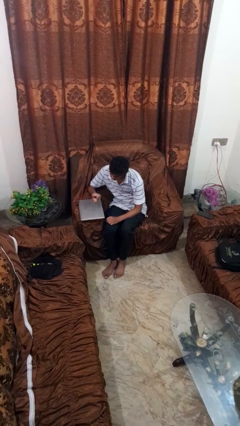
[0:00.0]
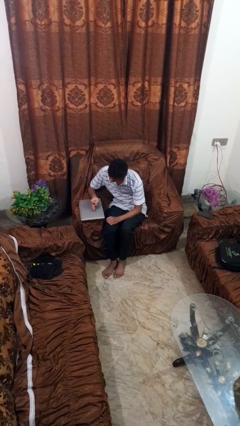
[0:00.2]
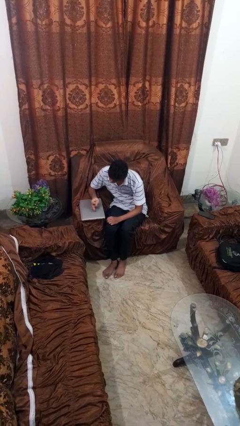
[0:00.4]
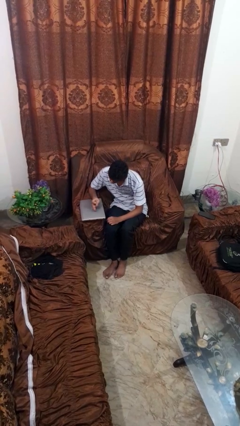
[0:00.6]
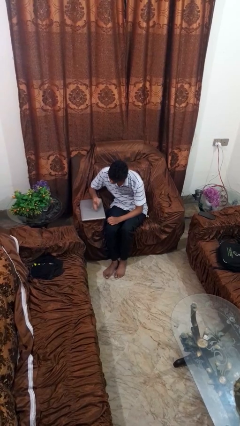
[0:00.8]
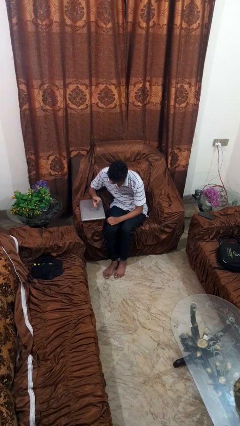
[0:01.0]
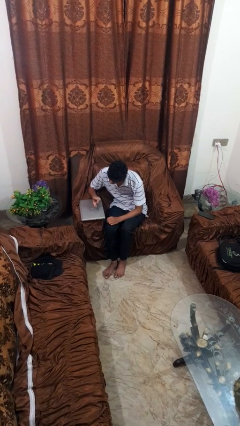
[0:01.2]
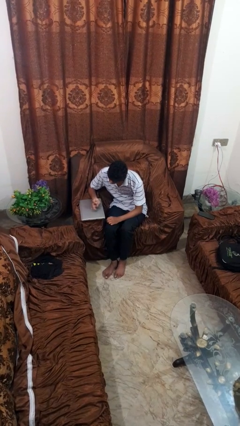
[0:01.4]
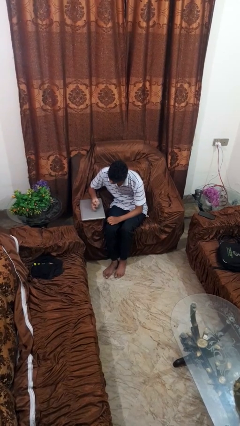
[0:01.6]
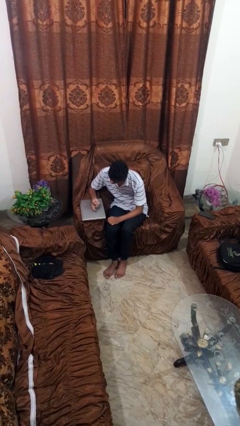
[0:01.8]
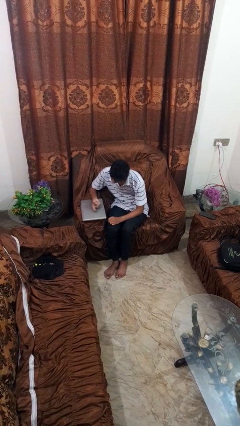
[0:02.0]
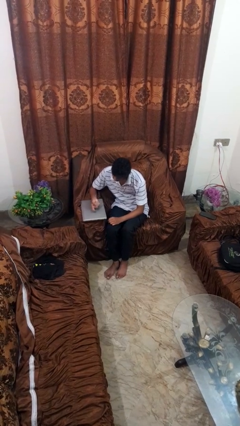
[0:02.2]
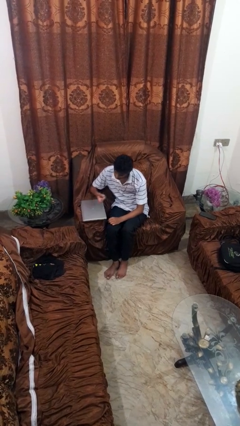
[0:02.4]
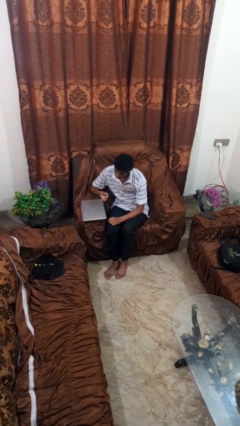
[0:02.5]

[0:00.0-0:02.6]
person taps object with finger

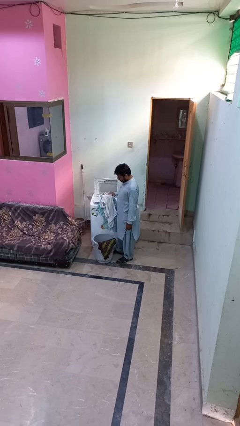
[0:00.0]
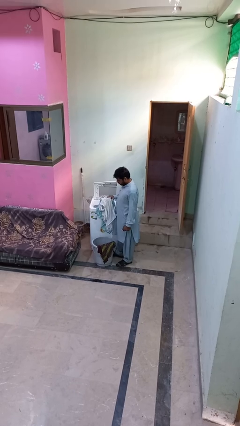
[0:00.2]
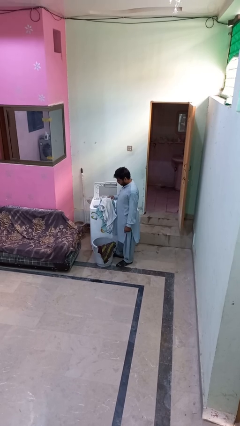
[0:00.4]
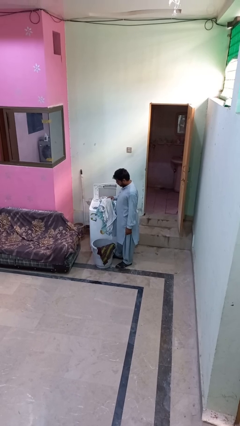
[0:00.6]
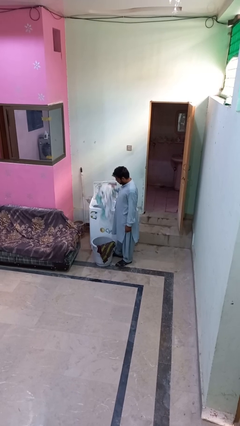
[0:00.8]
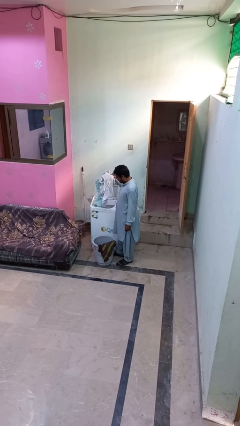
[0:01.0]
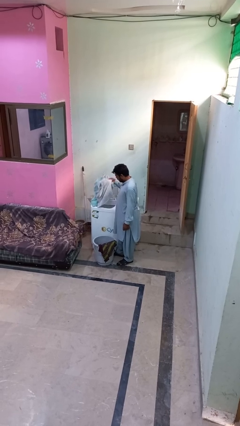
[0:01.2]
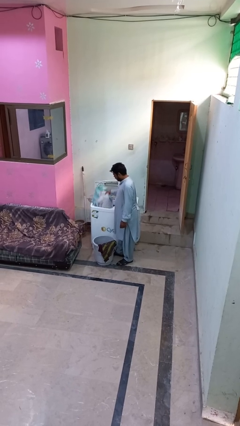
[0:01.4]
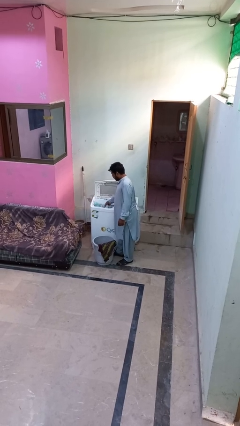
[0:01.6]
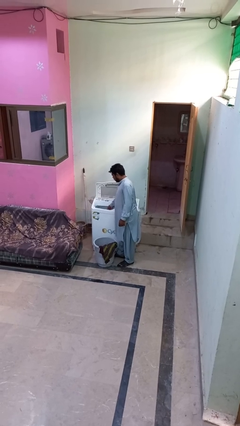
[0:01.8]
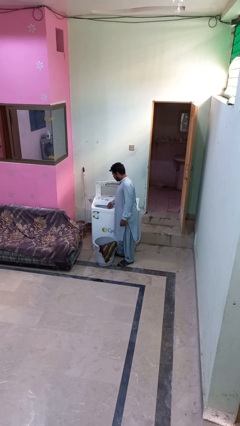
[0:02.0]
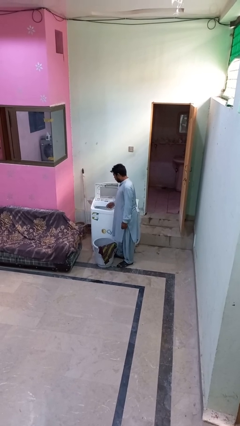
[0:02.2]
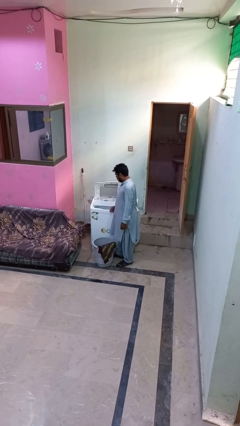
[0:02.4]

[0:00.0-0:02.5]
person loads clotheswasher

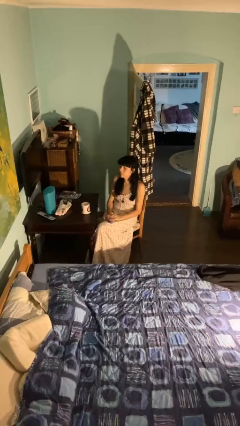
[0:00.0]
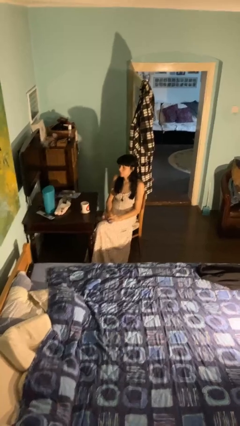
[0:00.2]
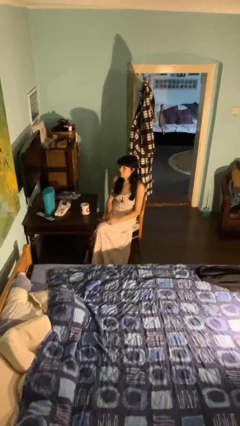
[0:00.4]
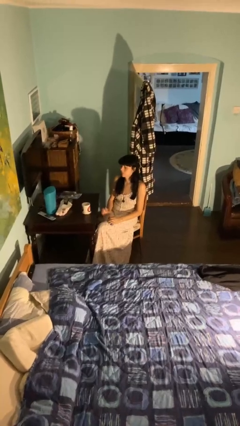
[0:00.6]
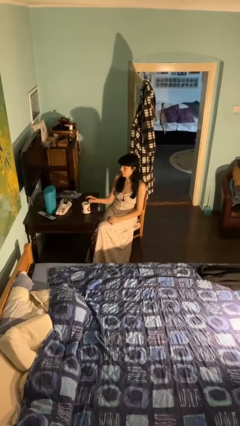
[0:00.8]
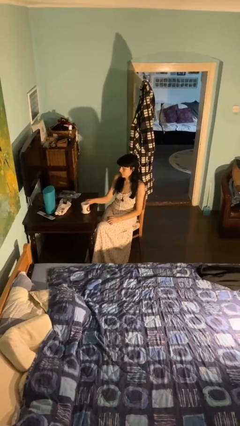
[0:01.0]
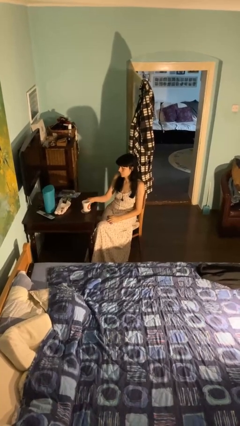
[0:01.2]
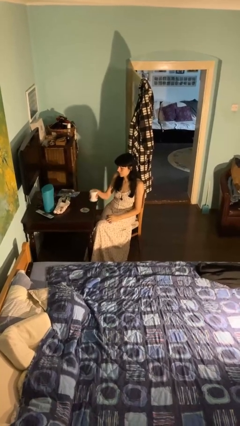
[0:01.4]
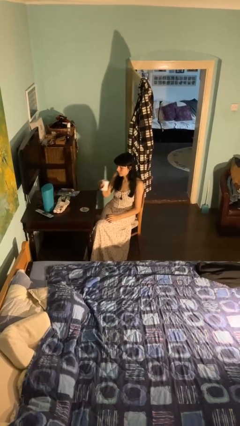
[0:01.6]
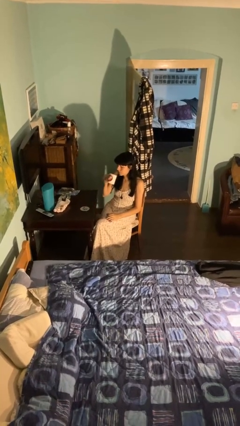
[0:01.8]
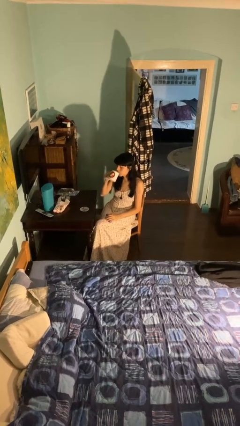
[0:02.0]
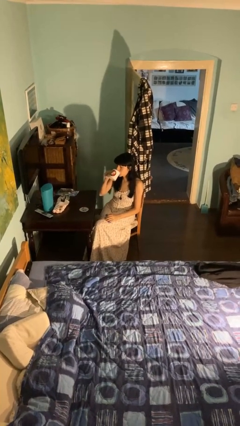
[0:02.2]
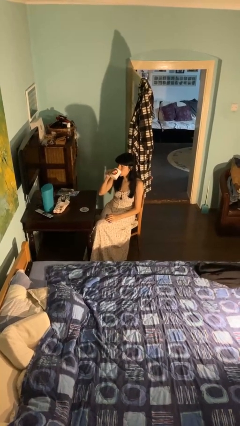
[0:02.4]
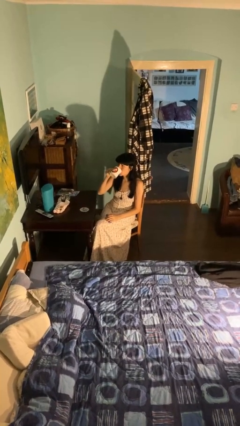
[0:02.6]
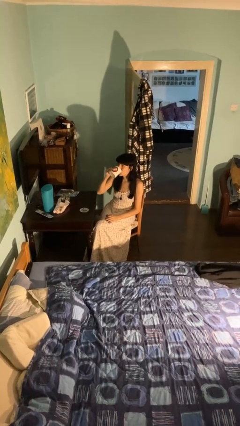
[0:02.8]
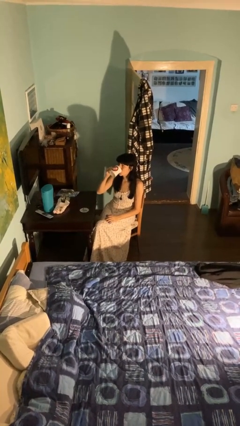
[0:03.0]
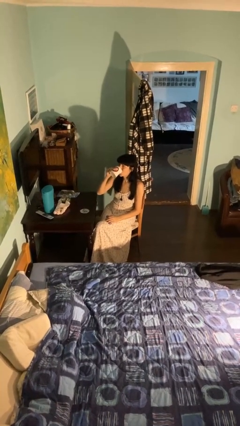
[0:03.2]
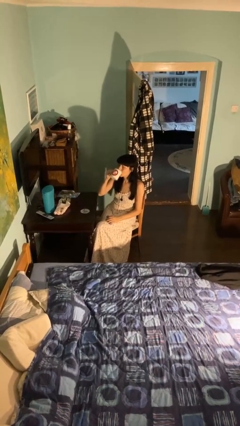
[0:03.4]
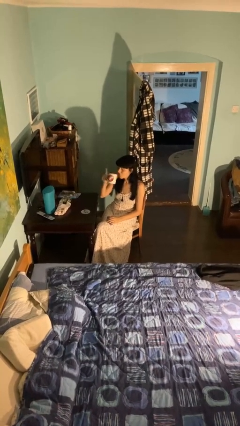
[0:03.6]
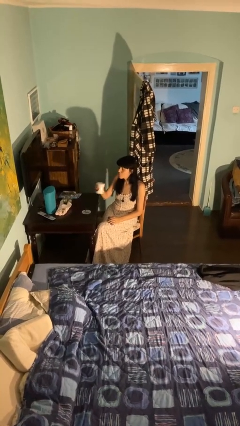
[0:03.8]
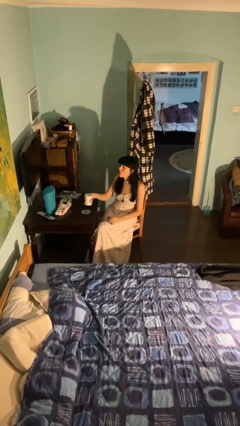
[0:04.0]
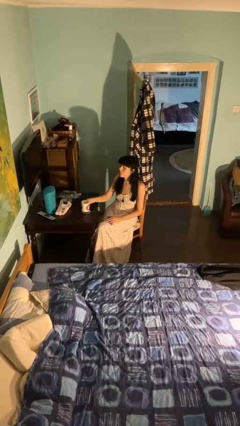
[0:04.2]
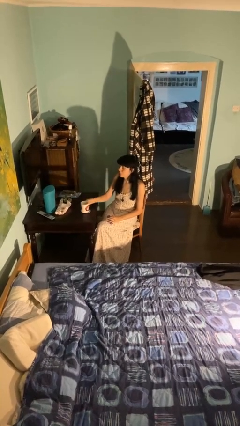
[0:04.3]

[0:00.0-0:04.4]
person drinks from cup

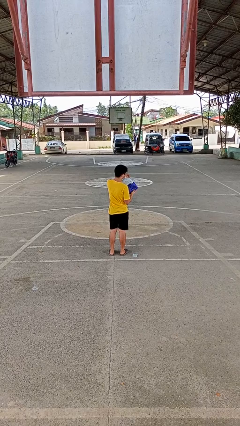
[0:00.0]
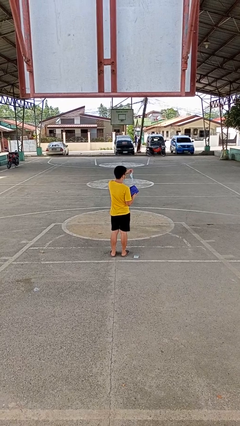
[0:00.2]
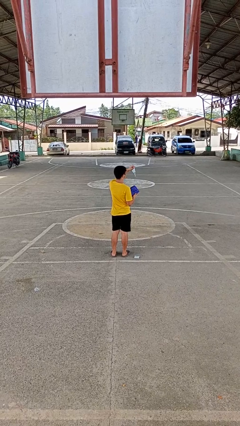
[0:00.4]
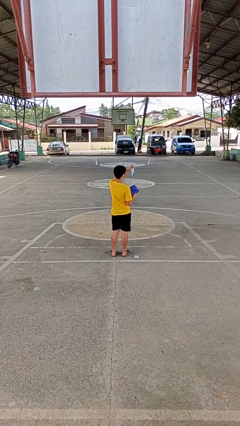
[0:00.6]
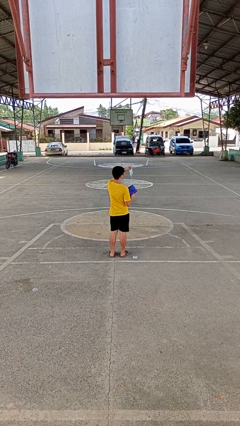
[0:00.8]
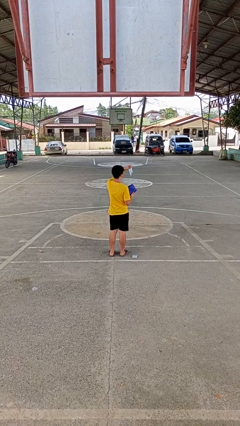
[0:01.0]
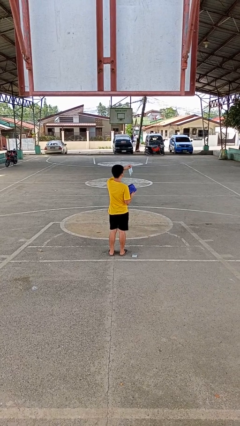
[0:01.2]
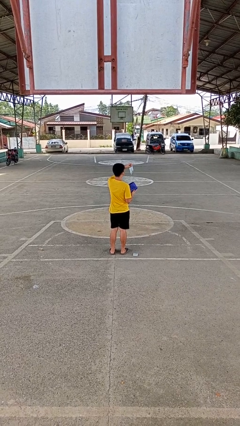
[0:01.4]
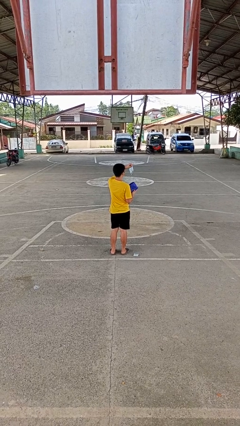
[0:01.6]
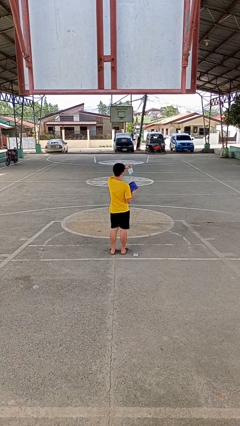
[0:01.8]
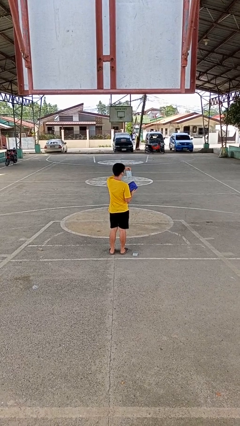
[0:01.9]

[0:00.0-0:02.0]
person takes object from purse

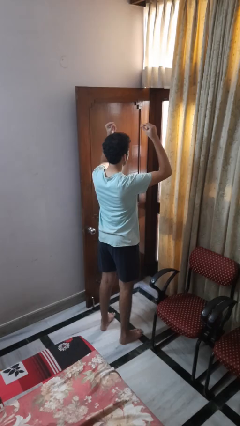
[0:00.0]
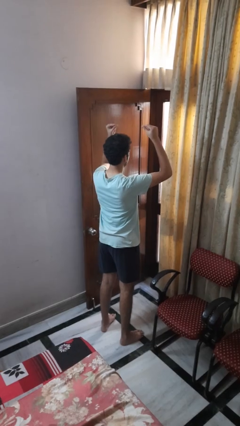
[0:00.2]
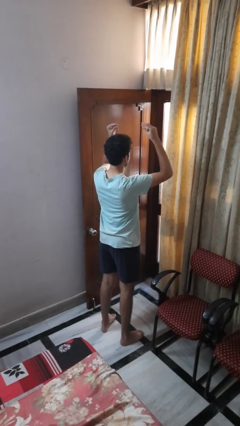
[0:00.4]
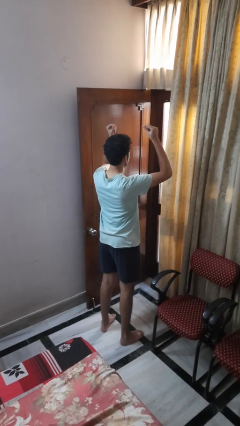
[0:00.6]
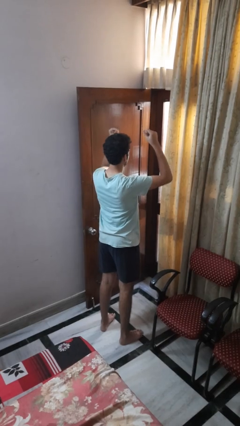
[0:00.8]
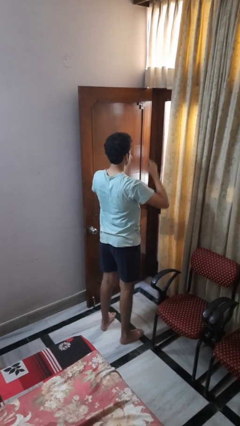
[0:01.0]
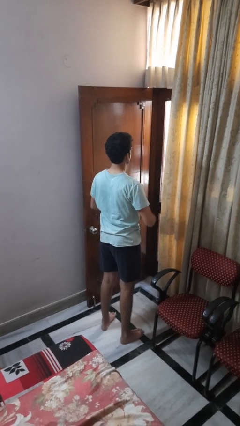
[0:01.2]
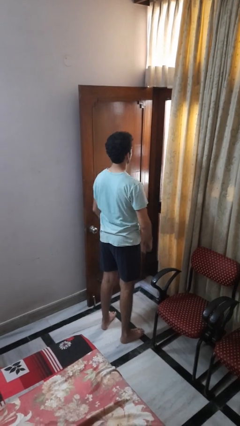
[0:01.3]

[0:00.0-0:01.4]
person snaps fingers

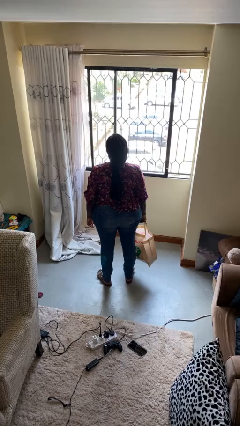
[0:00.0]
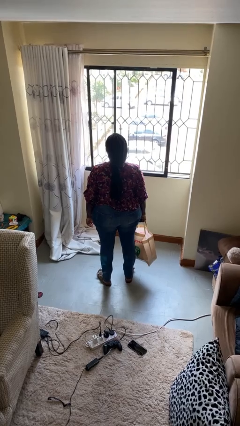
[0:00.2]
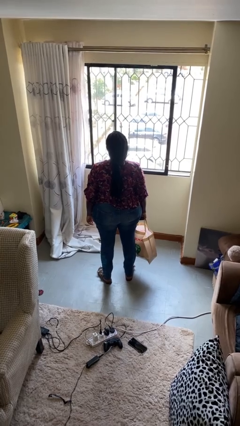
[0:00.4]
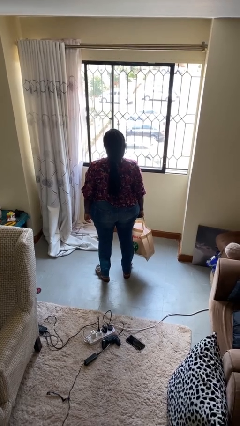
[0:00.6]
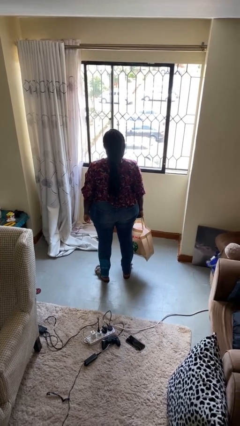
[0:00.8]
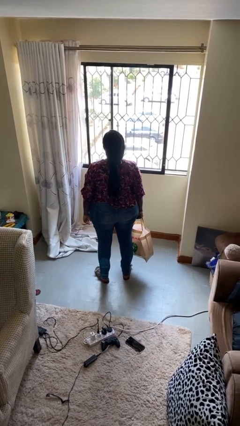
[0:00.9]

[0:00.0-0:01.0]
person puts object into bag

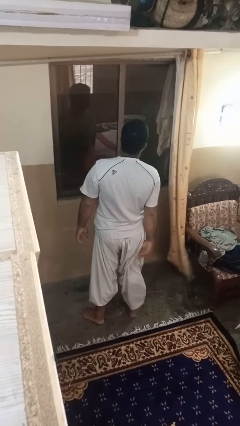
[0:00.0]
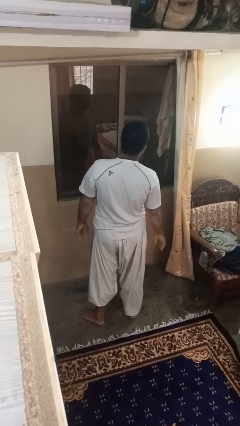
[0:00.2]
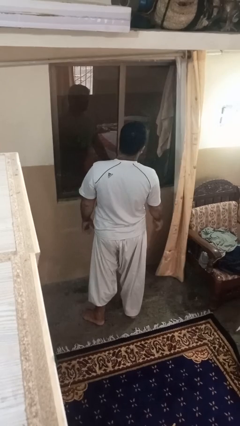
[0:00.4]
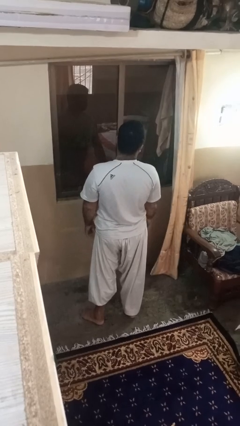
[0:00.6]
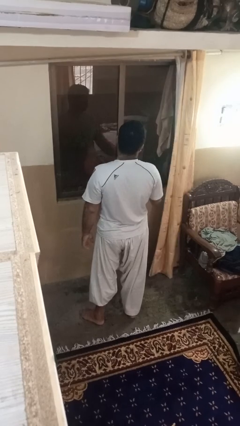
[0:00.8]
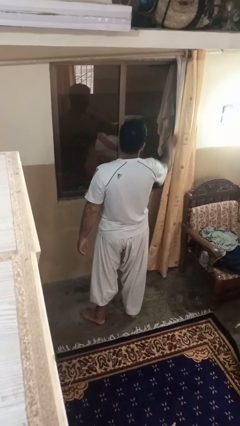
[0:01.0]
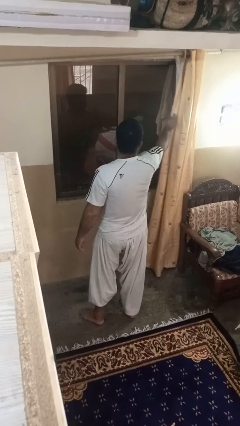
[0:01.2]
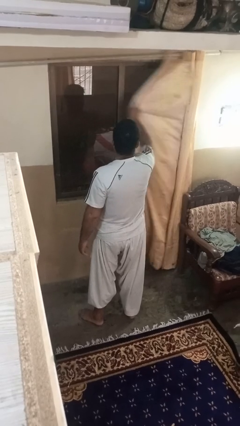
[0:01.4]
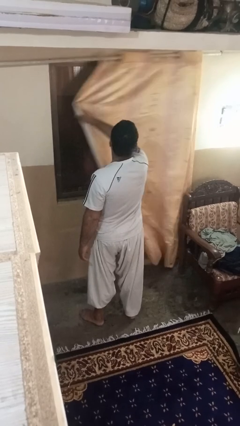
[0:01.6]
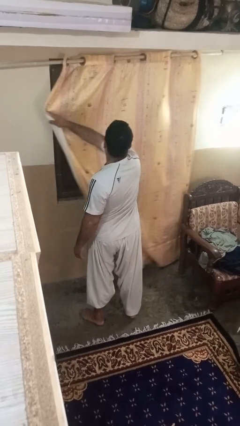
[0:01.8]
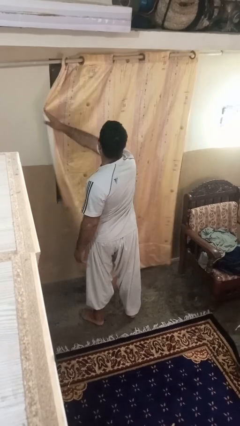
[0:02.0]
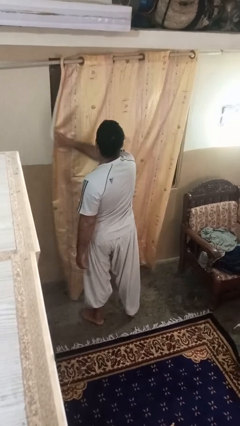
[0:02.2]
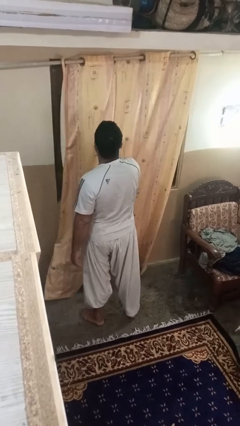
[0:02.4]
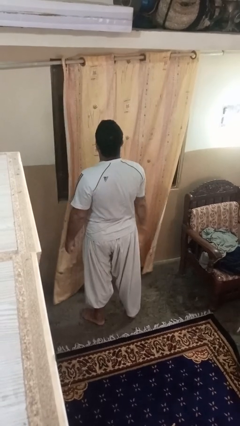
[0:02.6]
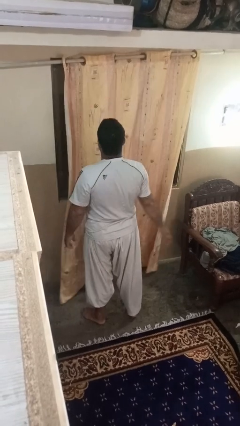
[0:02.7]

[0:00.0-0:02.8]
person closes curtains

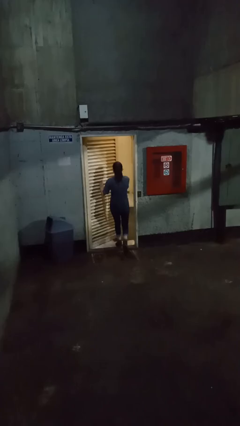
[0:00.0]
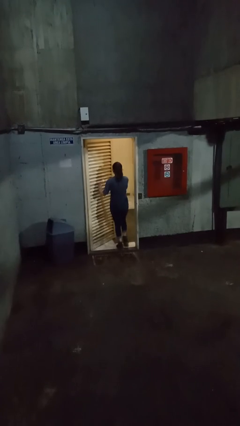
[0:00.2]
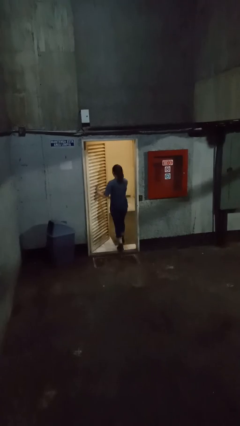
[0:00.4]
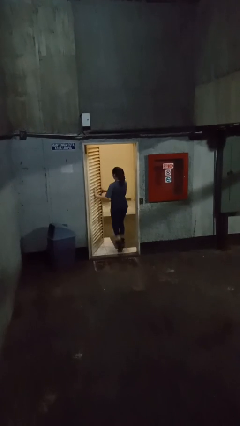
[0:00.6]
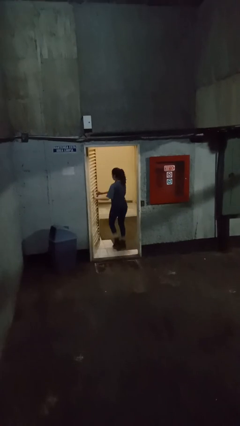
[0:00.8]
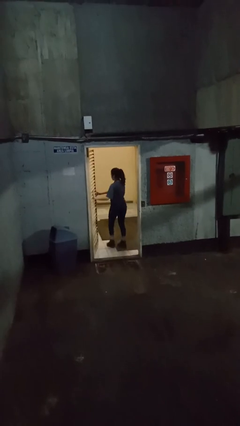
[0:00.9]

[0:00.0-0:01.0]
person opens facility door
